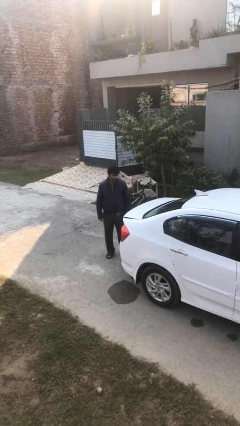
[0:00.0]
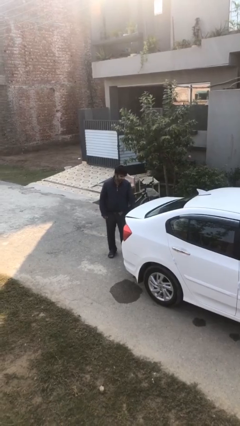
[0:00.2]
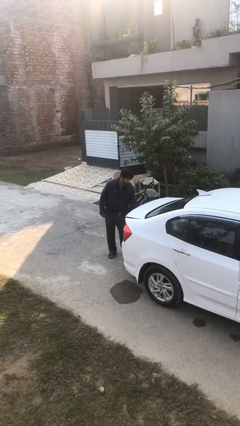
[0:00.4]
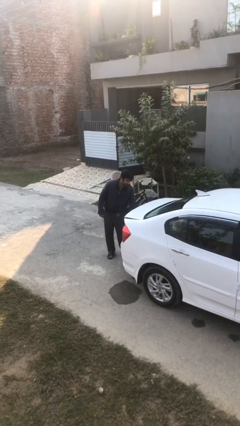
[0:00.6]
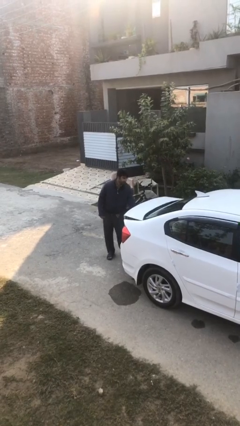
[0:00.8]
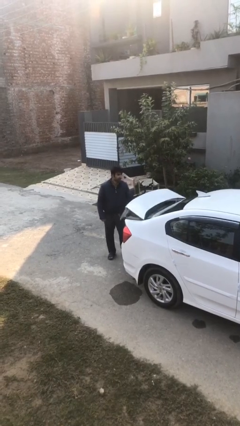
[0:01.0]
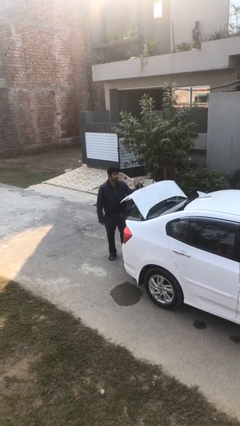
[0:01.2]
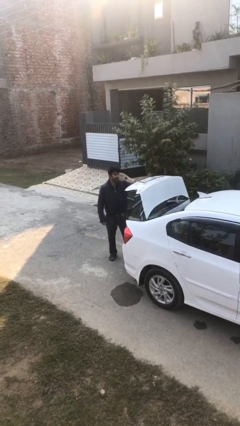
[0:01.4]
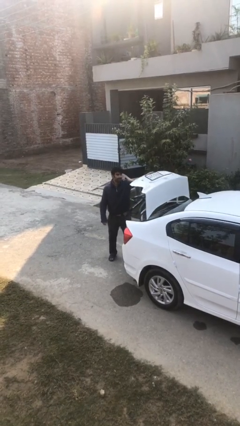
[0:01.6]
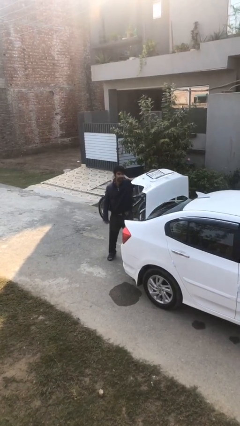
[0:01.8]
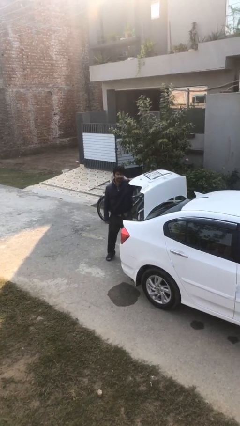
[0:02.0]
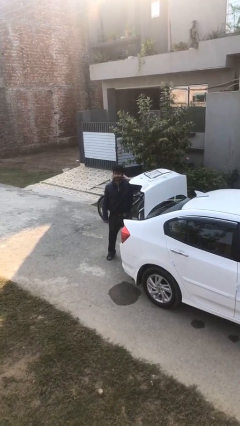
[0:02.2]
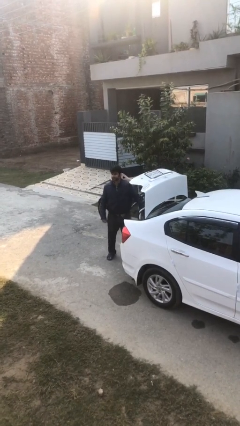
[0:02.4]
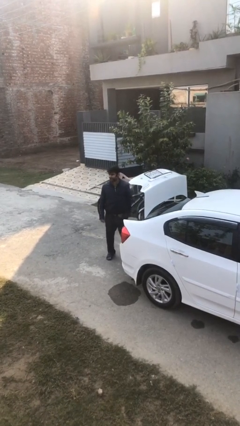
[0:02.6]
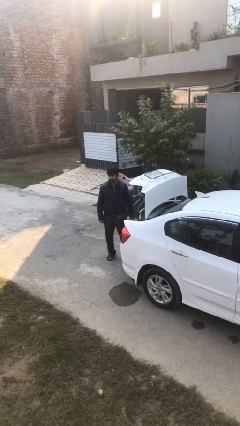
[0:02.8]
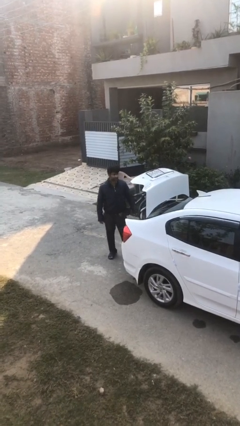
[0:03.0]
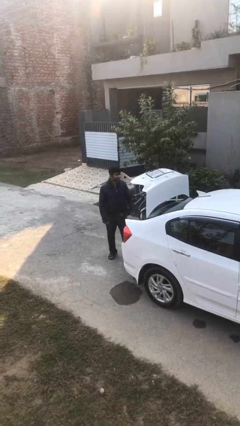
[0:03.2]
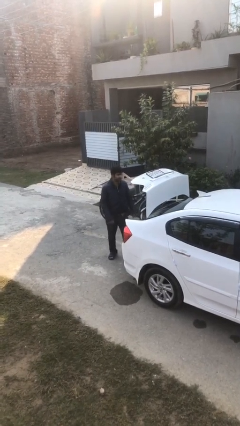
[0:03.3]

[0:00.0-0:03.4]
person opens car trunk

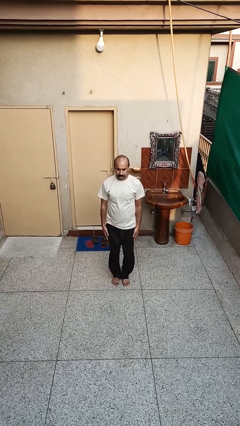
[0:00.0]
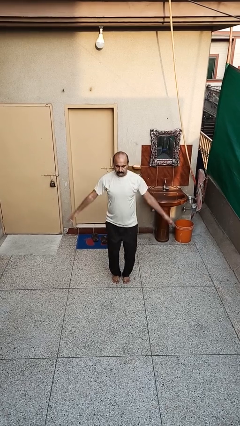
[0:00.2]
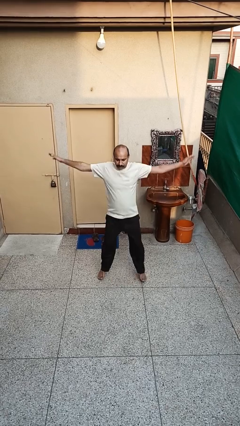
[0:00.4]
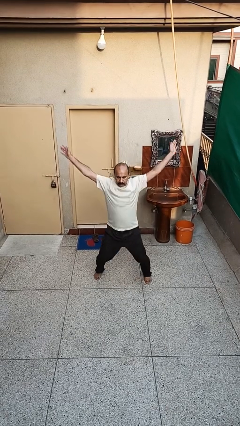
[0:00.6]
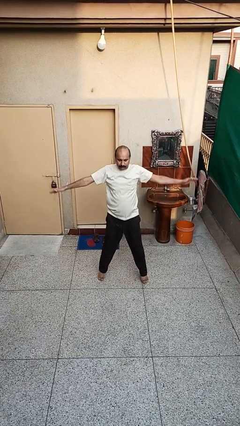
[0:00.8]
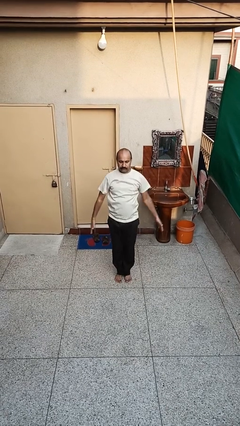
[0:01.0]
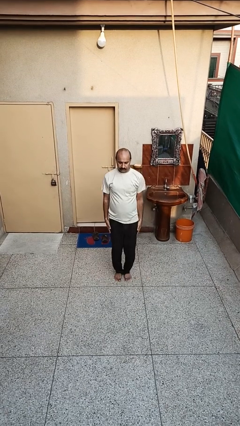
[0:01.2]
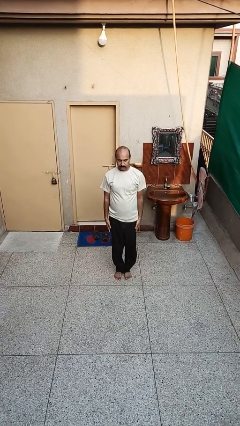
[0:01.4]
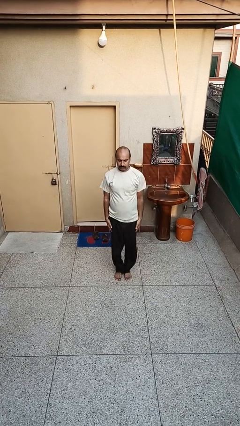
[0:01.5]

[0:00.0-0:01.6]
person exercises with jumping jacks

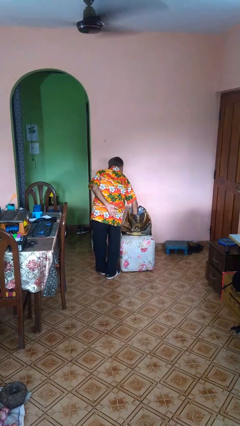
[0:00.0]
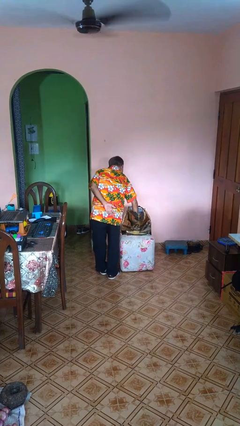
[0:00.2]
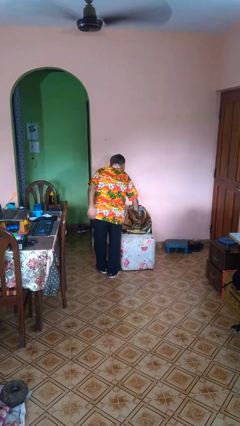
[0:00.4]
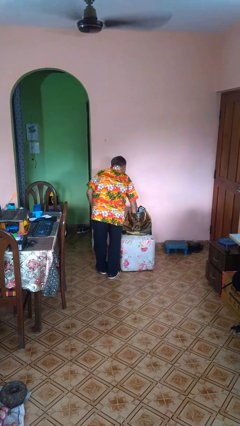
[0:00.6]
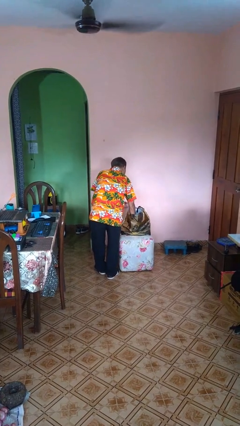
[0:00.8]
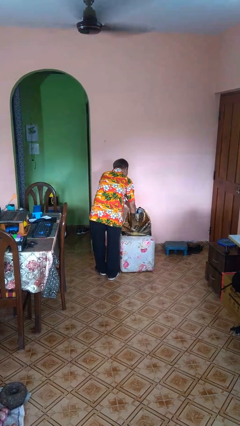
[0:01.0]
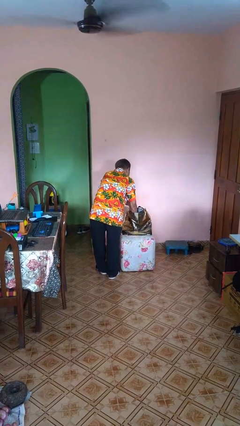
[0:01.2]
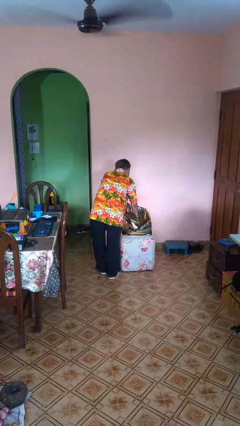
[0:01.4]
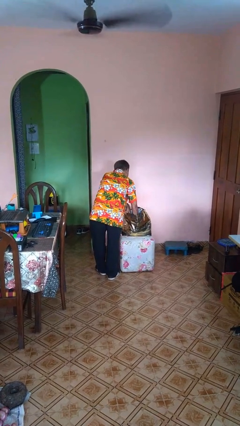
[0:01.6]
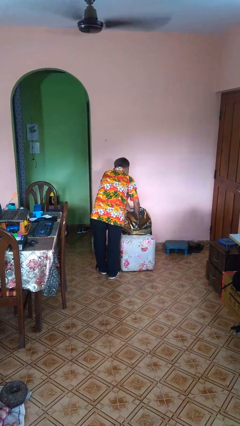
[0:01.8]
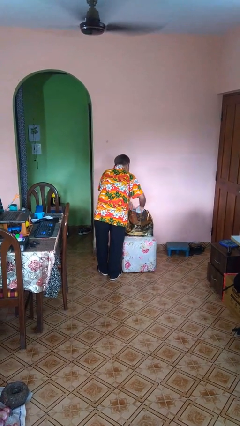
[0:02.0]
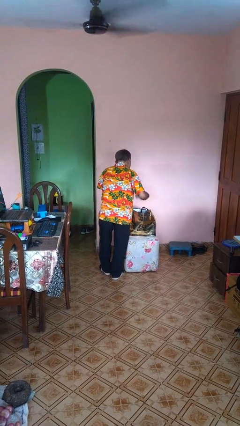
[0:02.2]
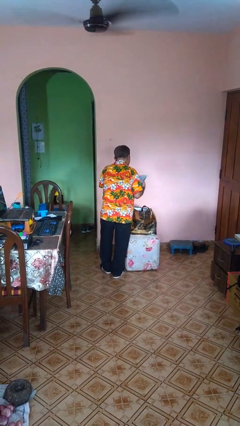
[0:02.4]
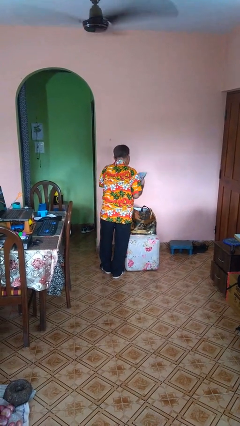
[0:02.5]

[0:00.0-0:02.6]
person takes object from bag

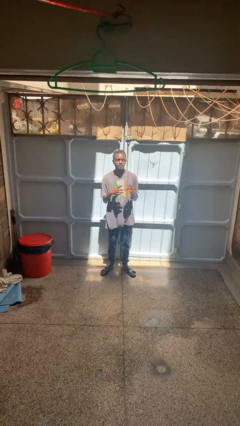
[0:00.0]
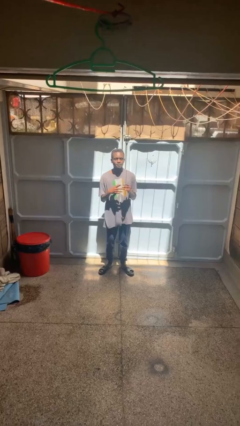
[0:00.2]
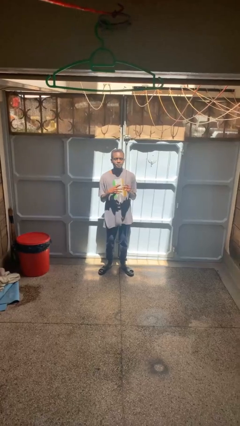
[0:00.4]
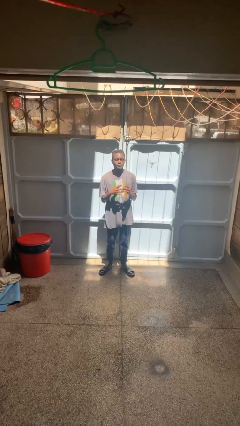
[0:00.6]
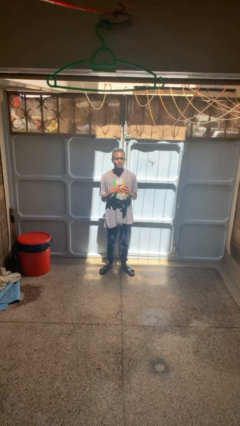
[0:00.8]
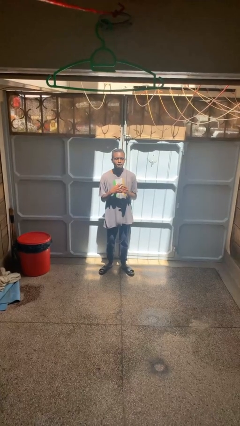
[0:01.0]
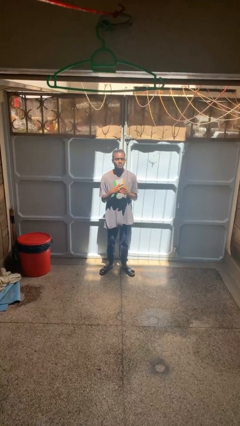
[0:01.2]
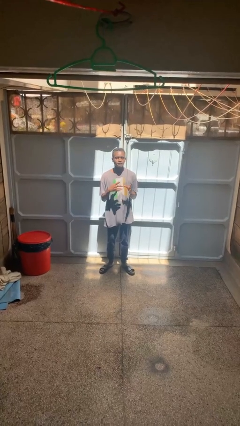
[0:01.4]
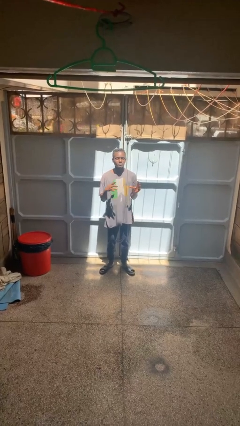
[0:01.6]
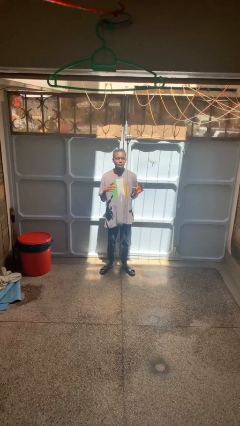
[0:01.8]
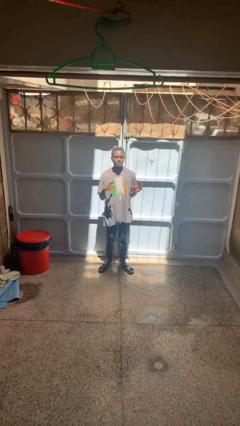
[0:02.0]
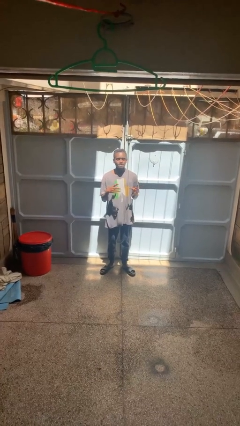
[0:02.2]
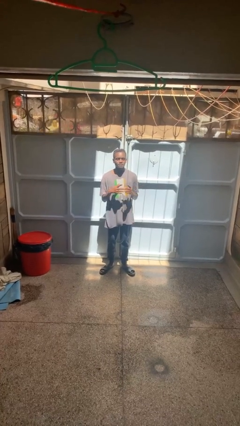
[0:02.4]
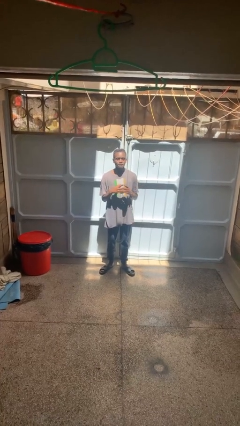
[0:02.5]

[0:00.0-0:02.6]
person puts on ring

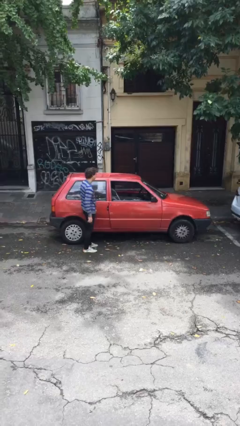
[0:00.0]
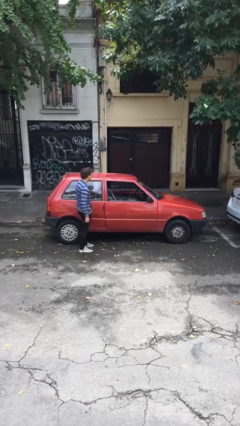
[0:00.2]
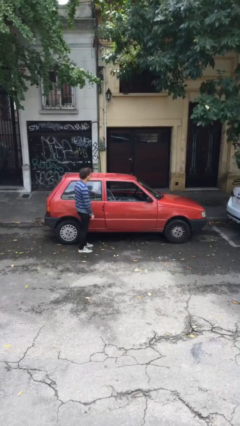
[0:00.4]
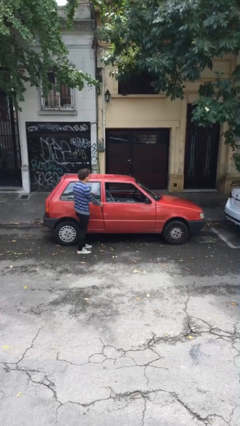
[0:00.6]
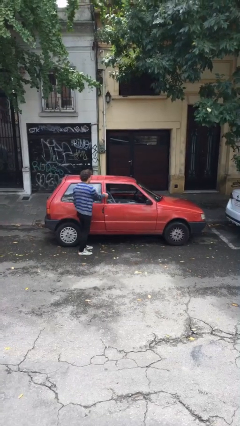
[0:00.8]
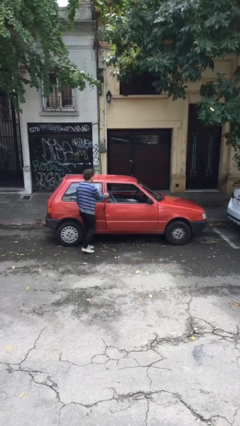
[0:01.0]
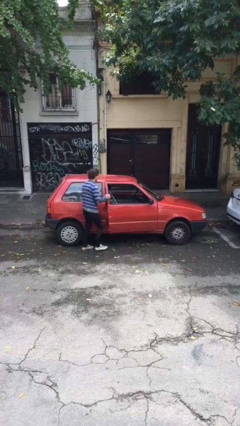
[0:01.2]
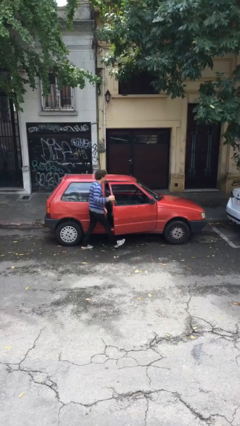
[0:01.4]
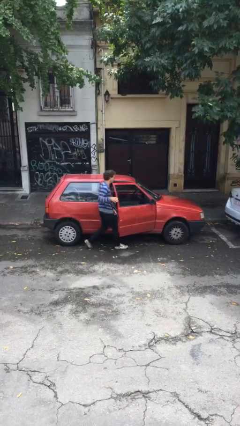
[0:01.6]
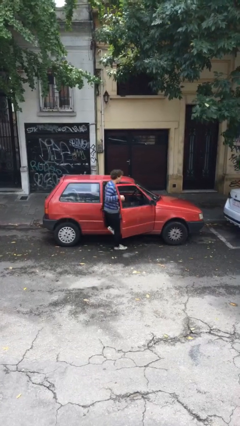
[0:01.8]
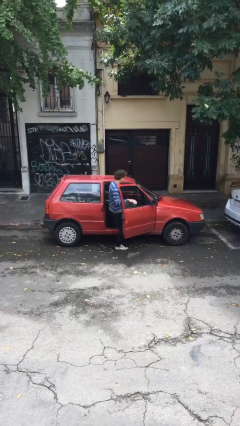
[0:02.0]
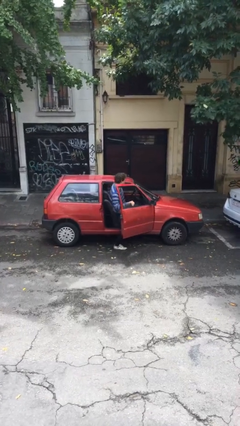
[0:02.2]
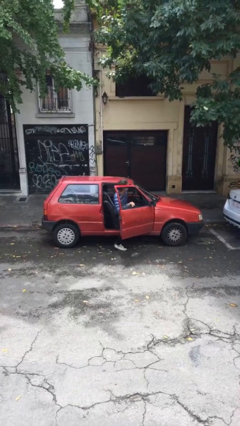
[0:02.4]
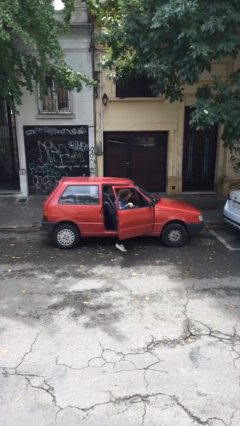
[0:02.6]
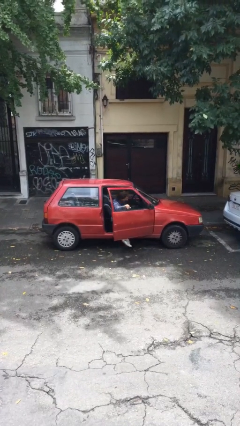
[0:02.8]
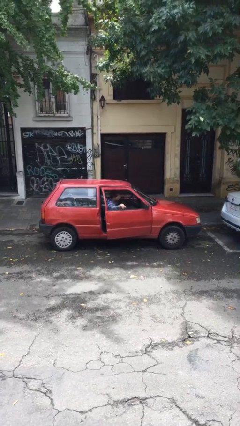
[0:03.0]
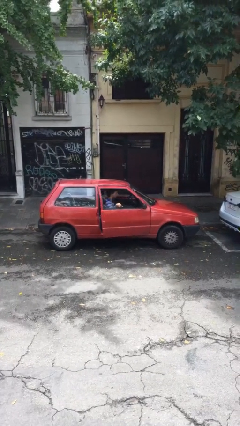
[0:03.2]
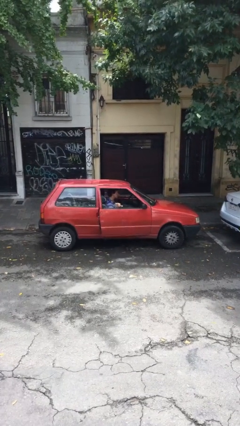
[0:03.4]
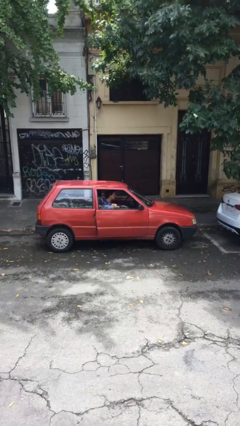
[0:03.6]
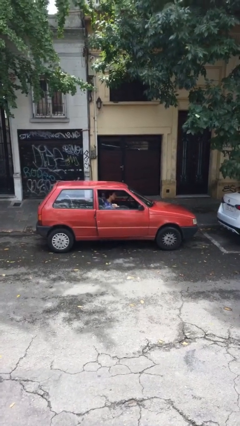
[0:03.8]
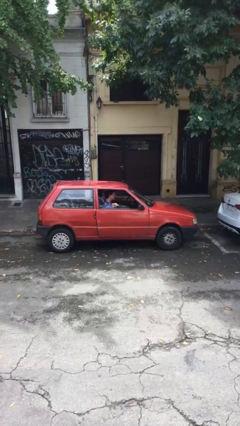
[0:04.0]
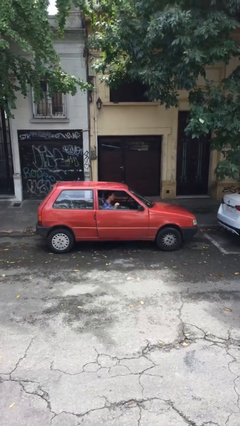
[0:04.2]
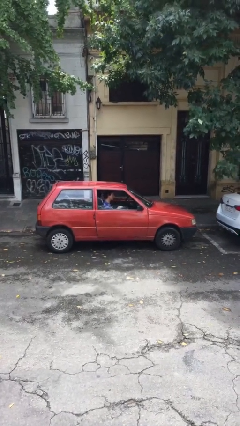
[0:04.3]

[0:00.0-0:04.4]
car picks up person

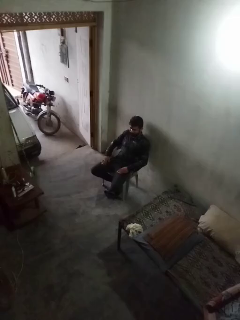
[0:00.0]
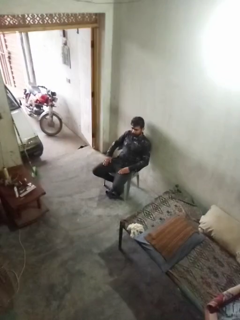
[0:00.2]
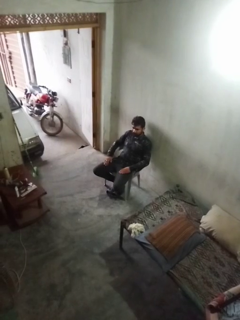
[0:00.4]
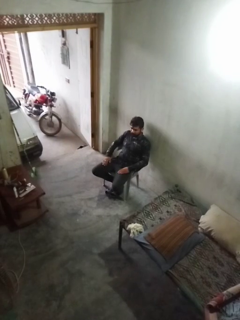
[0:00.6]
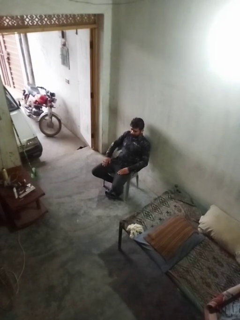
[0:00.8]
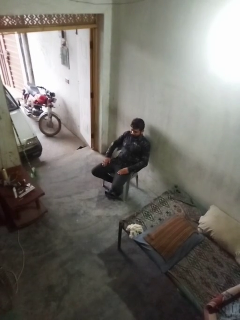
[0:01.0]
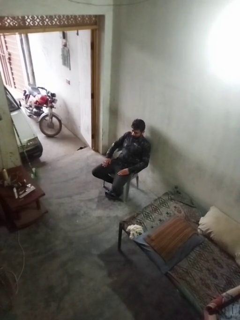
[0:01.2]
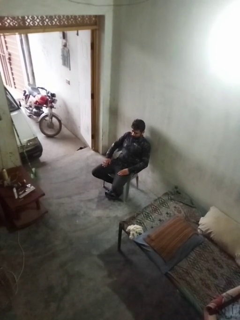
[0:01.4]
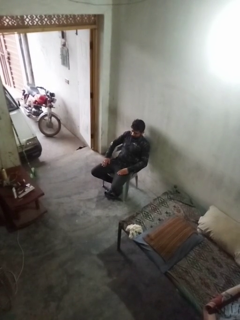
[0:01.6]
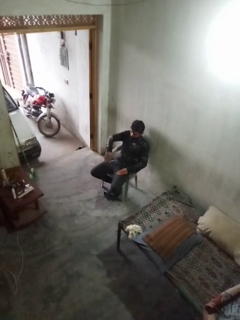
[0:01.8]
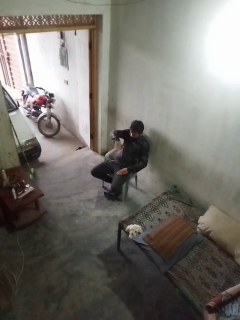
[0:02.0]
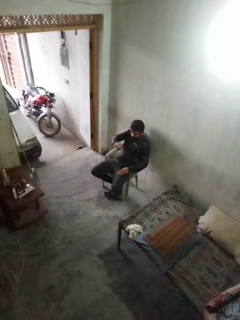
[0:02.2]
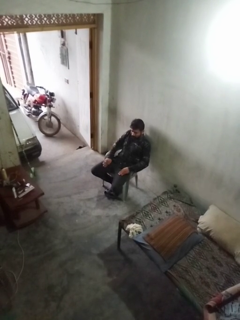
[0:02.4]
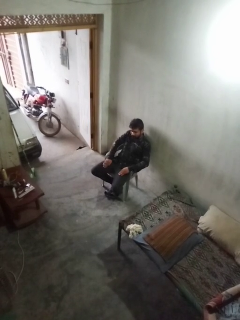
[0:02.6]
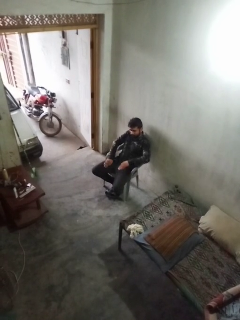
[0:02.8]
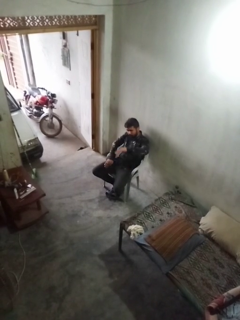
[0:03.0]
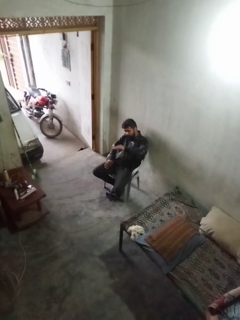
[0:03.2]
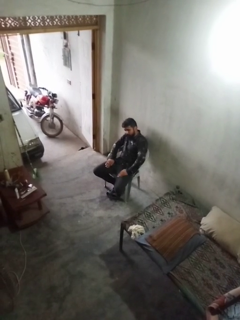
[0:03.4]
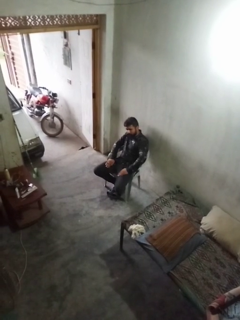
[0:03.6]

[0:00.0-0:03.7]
person slaps hands on thighs
